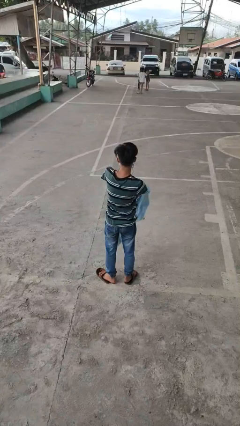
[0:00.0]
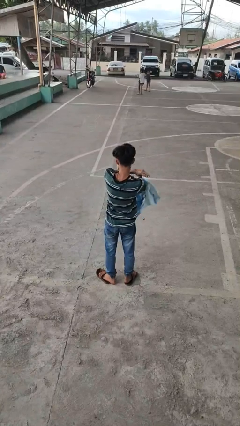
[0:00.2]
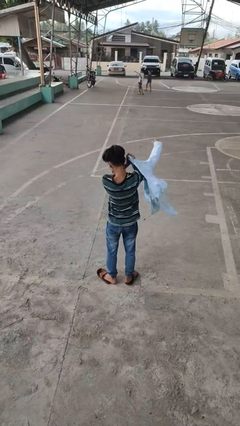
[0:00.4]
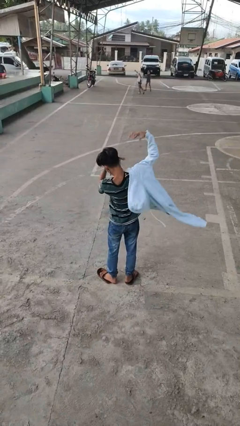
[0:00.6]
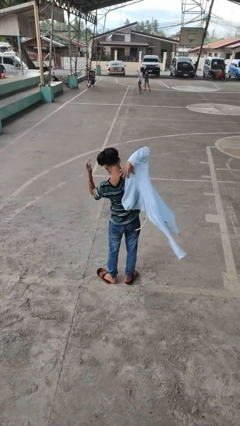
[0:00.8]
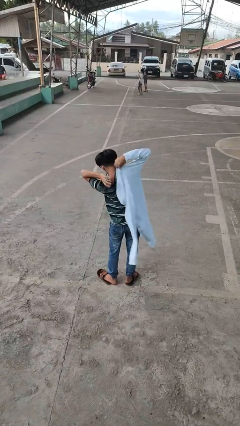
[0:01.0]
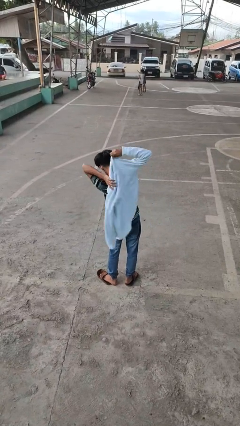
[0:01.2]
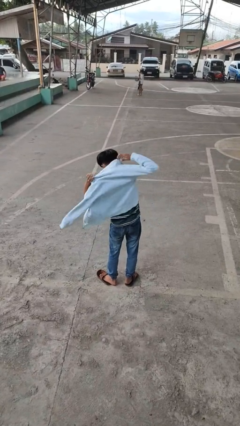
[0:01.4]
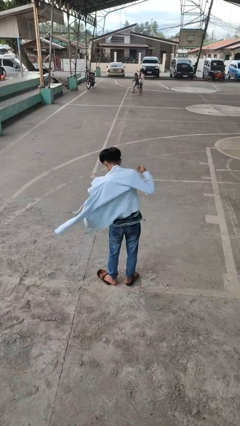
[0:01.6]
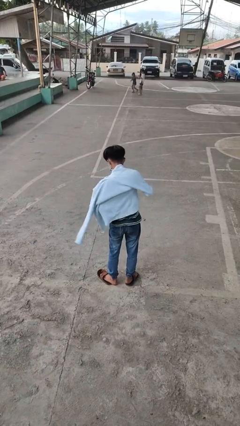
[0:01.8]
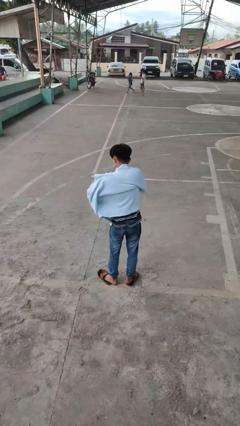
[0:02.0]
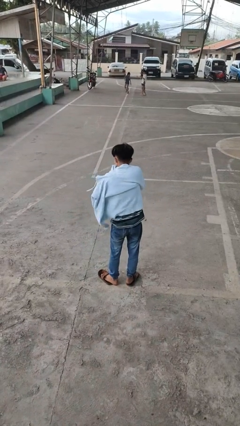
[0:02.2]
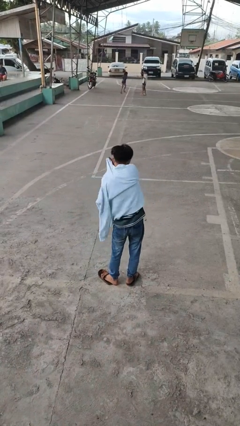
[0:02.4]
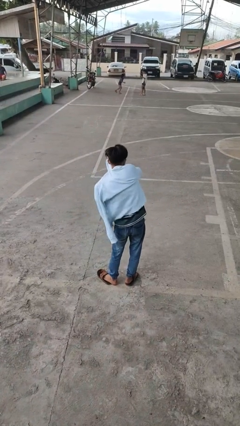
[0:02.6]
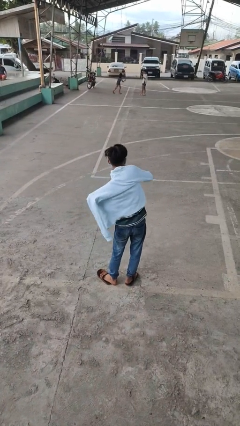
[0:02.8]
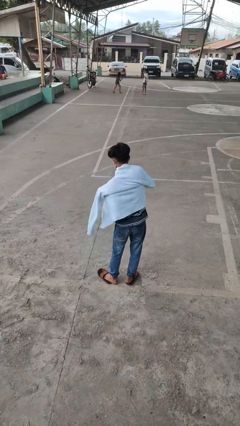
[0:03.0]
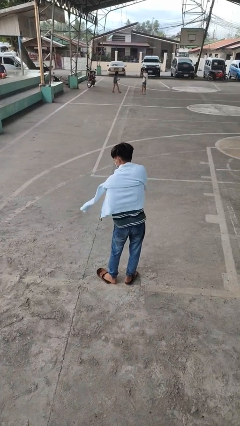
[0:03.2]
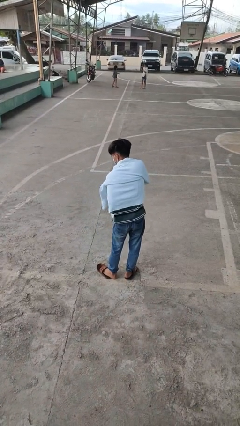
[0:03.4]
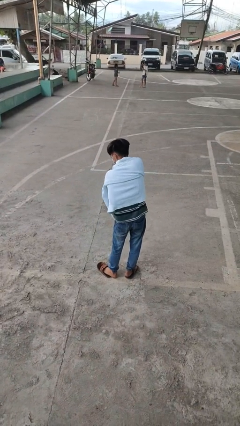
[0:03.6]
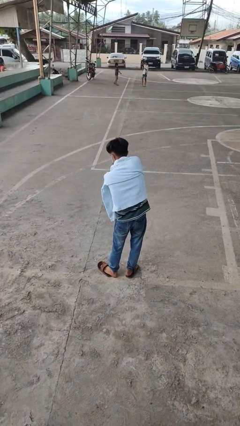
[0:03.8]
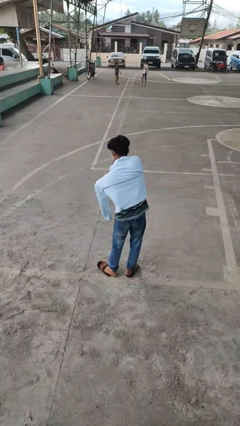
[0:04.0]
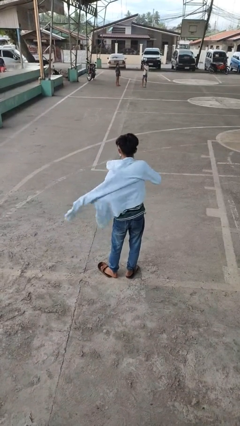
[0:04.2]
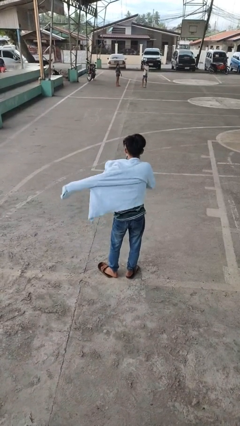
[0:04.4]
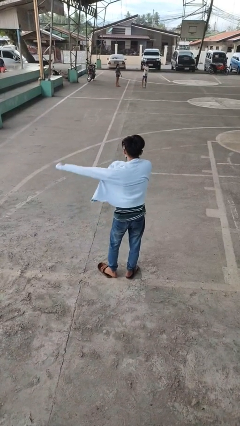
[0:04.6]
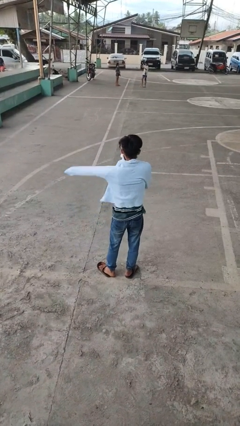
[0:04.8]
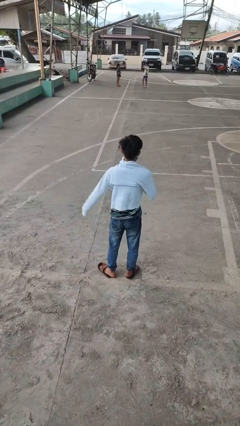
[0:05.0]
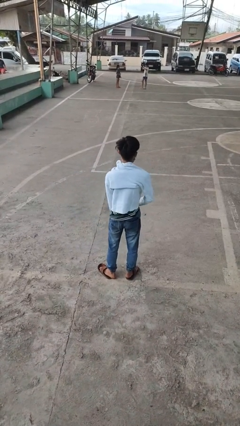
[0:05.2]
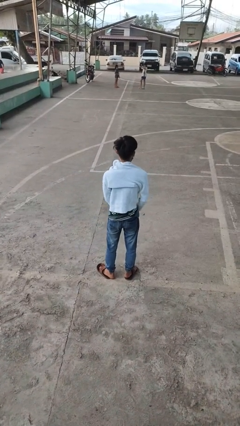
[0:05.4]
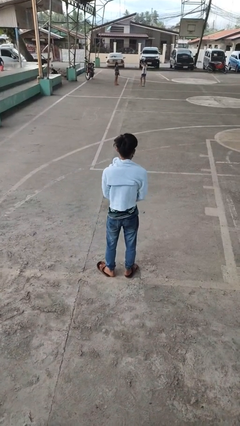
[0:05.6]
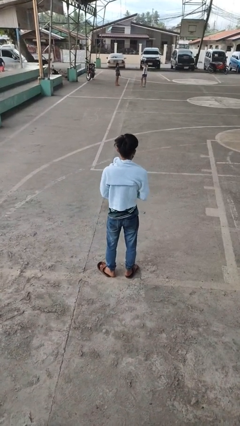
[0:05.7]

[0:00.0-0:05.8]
person puts on jacket

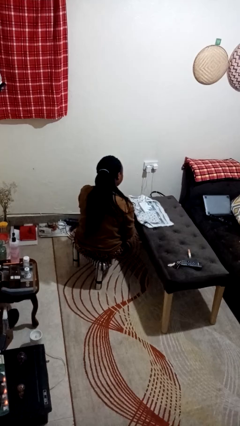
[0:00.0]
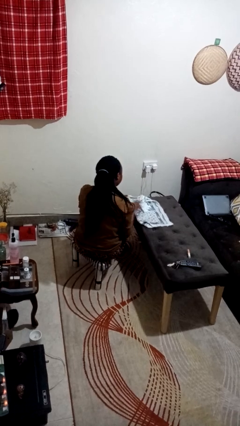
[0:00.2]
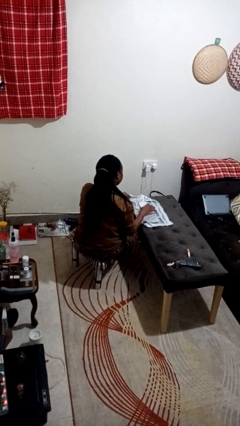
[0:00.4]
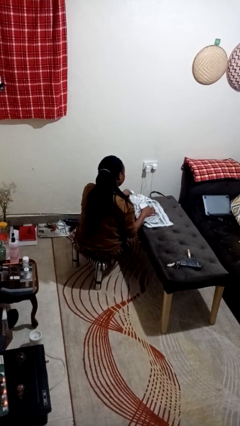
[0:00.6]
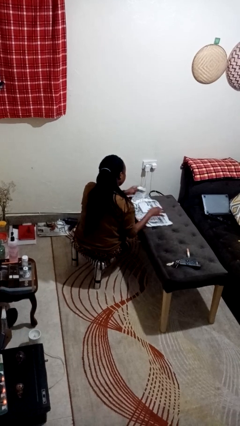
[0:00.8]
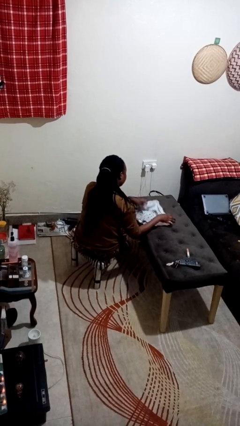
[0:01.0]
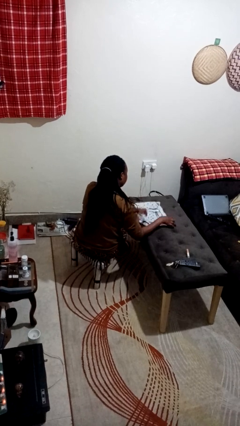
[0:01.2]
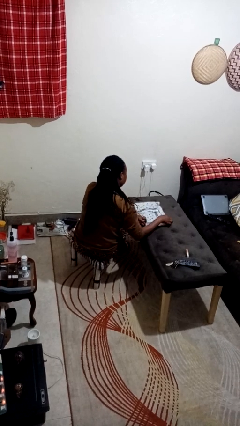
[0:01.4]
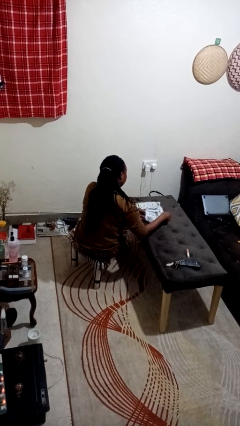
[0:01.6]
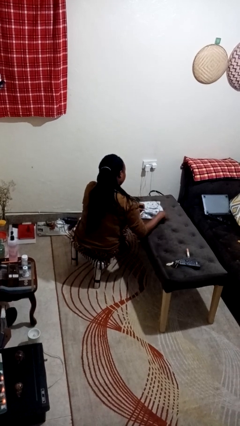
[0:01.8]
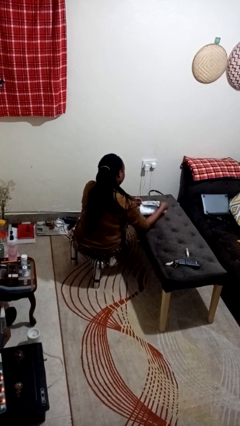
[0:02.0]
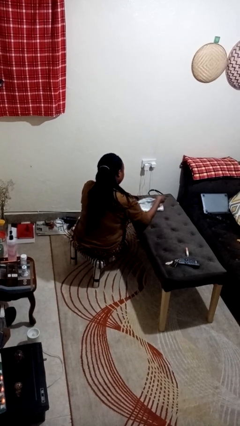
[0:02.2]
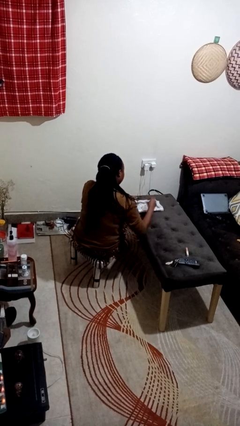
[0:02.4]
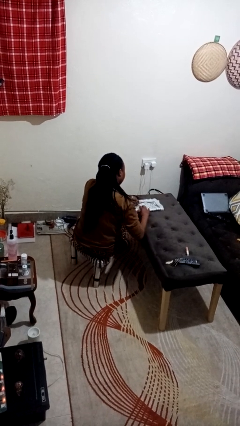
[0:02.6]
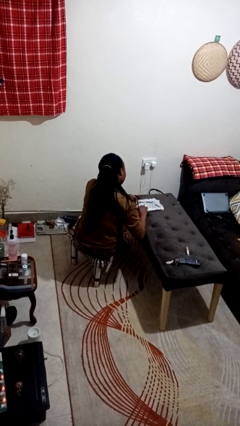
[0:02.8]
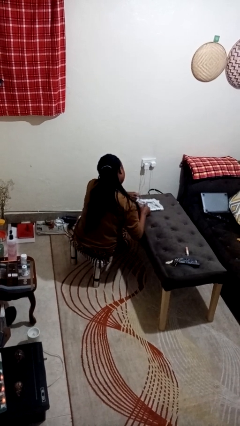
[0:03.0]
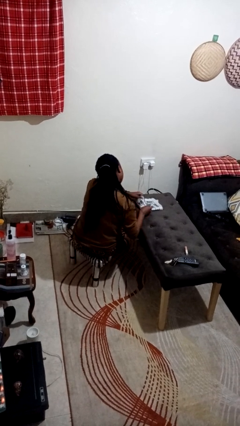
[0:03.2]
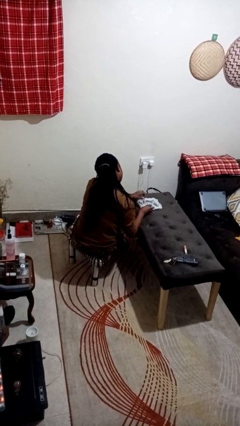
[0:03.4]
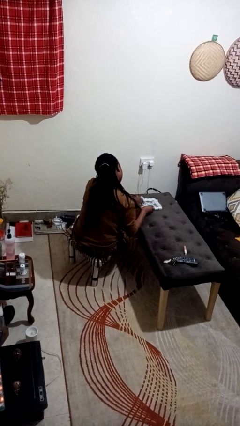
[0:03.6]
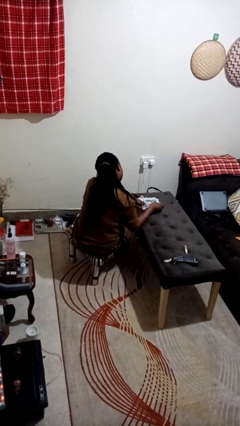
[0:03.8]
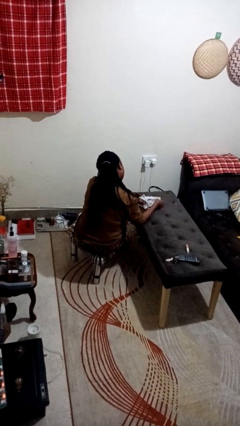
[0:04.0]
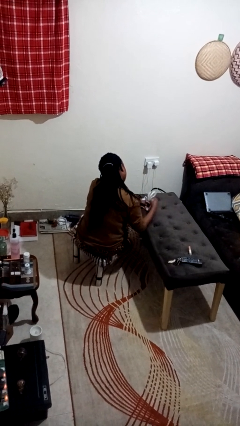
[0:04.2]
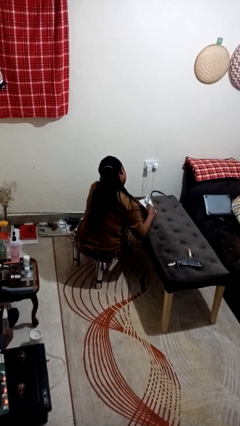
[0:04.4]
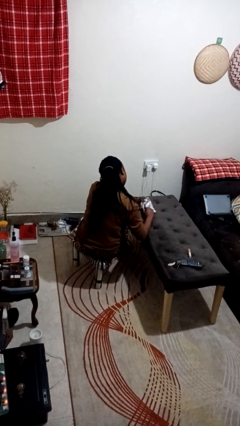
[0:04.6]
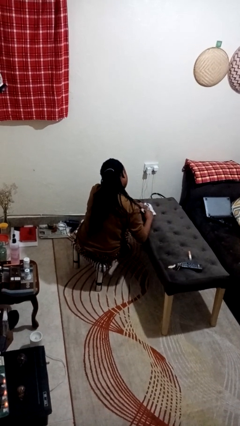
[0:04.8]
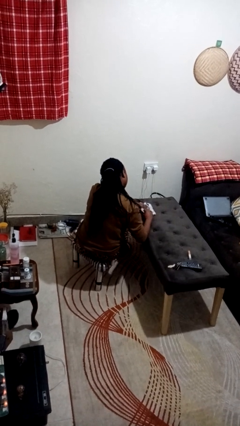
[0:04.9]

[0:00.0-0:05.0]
person wraps box

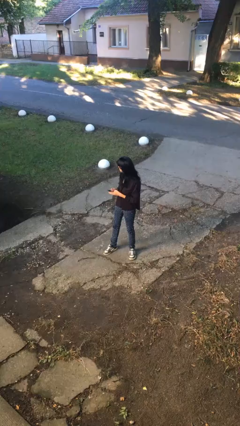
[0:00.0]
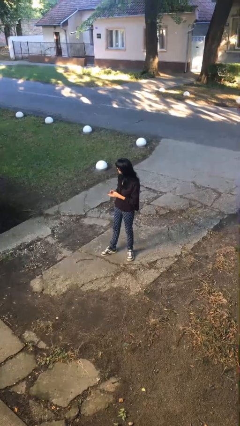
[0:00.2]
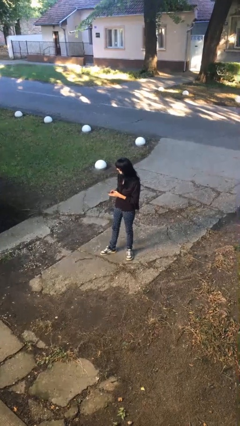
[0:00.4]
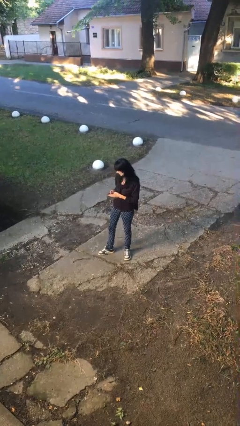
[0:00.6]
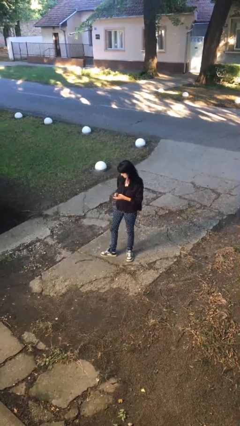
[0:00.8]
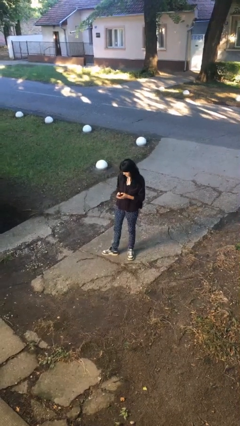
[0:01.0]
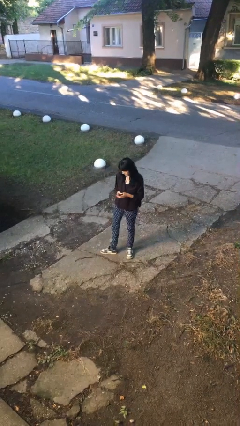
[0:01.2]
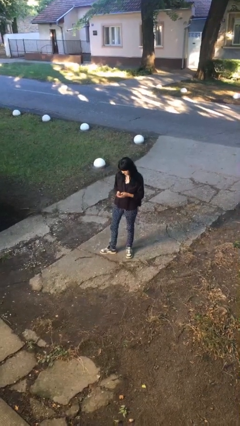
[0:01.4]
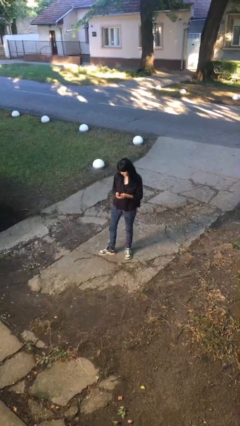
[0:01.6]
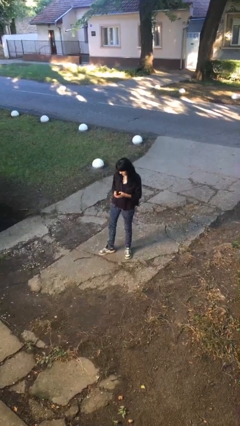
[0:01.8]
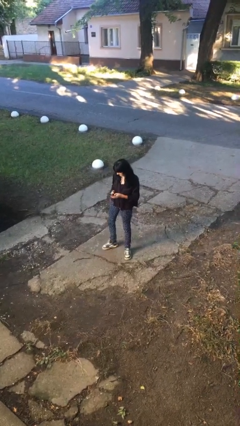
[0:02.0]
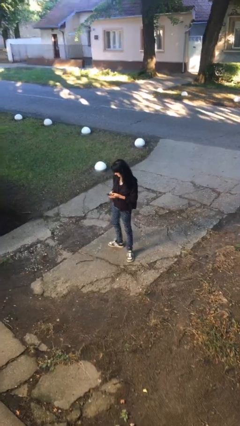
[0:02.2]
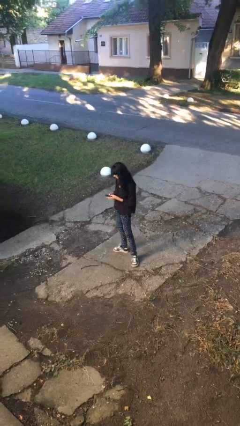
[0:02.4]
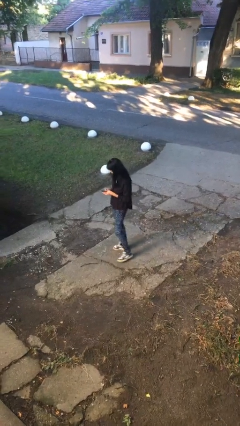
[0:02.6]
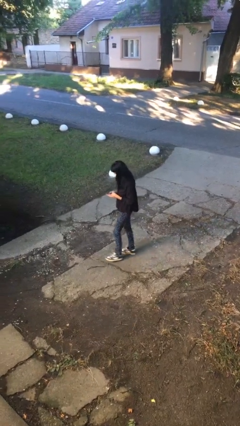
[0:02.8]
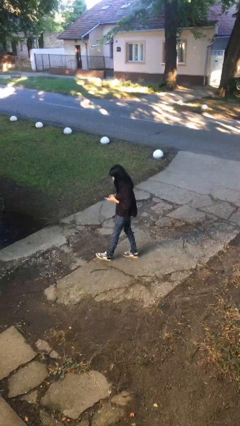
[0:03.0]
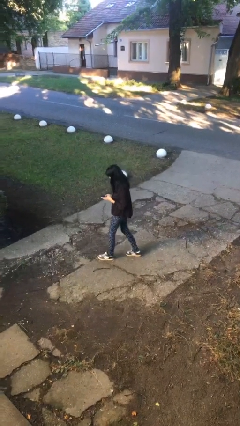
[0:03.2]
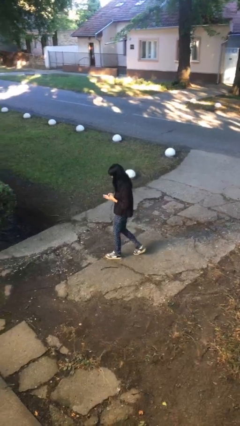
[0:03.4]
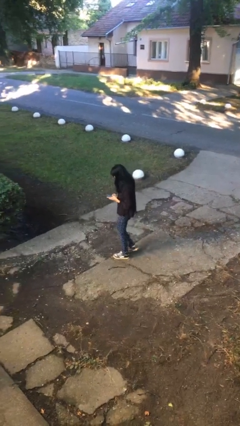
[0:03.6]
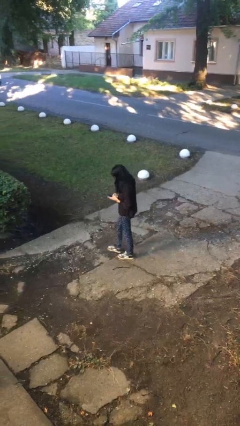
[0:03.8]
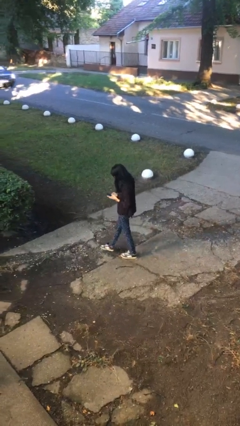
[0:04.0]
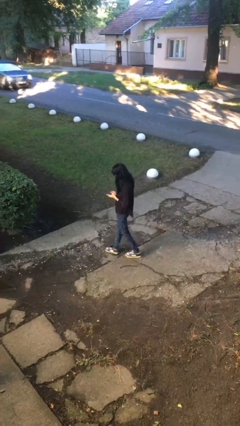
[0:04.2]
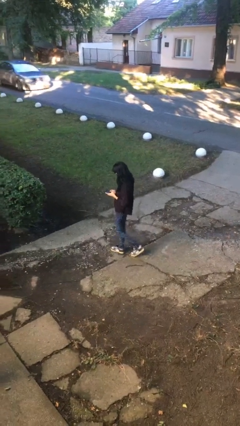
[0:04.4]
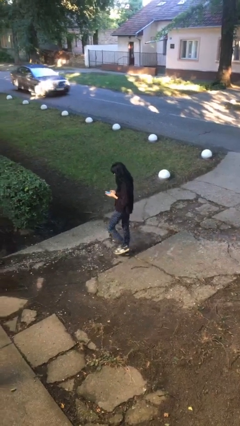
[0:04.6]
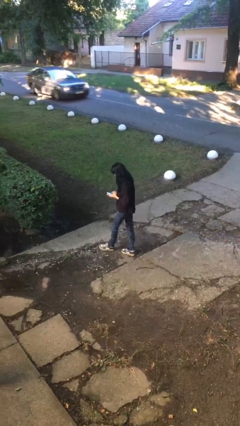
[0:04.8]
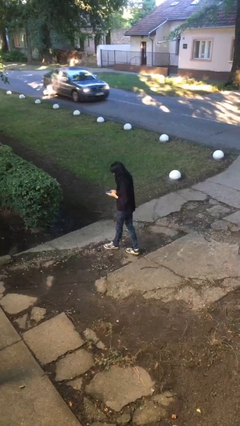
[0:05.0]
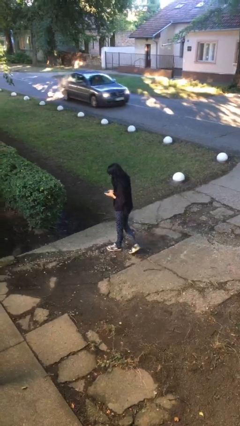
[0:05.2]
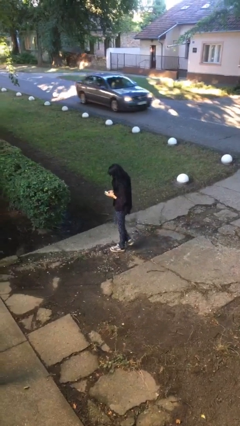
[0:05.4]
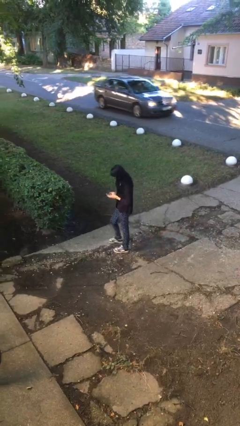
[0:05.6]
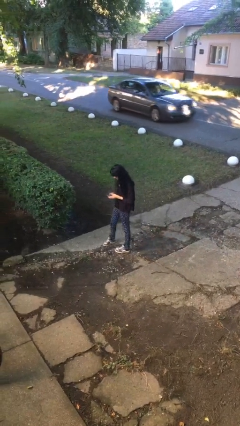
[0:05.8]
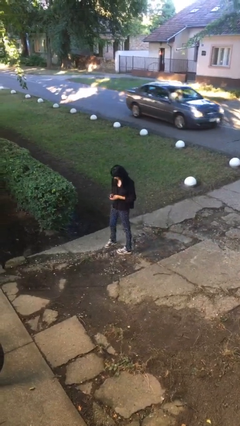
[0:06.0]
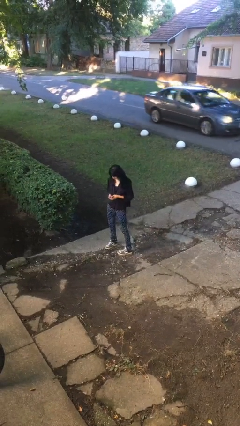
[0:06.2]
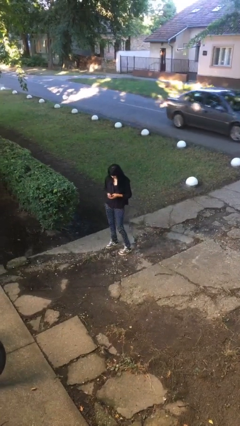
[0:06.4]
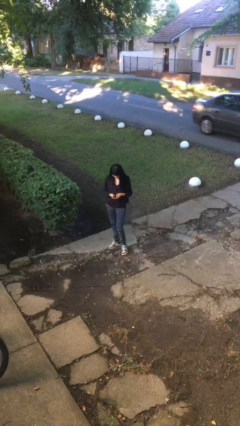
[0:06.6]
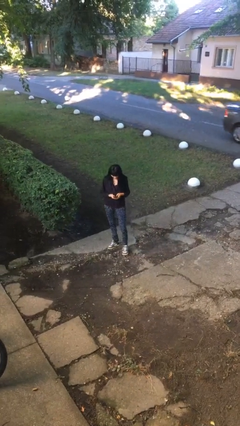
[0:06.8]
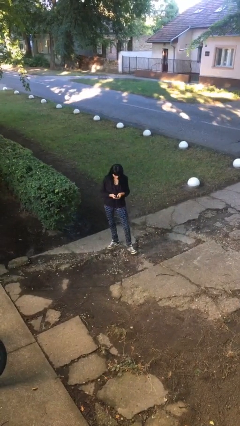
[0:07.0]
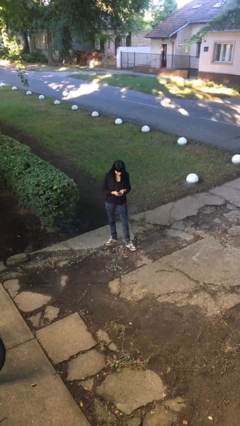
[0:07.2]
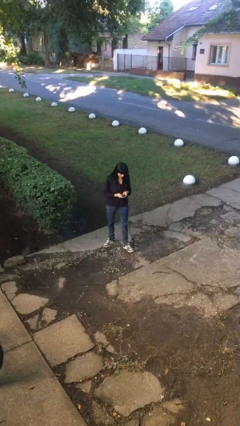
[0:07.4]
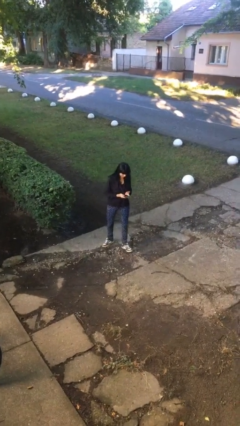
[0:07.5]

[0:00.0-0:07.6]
person texts on phone

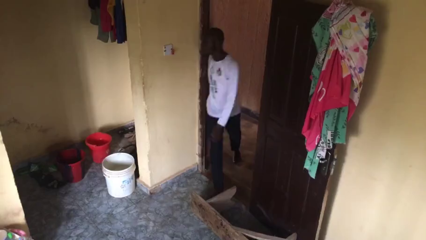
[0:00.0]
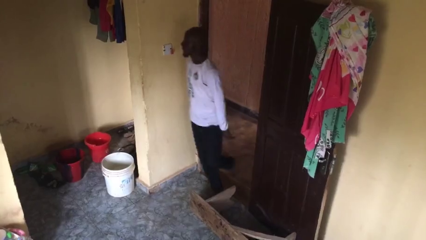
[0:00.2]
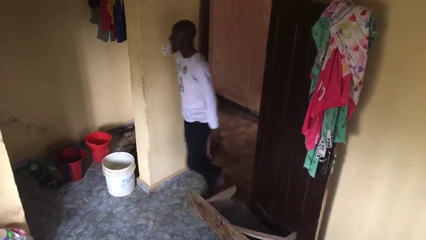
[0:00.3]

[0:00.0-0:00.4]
person stubs toe
